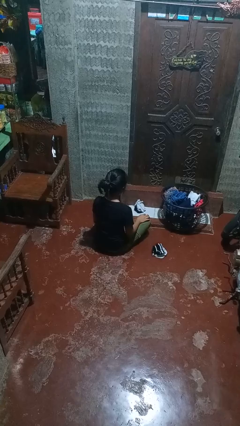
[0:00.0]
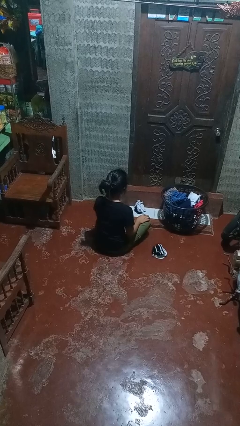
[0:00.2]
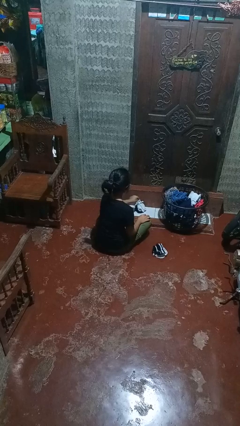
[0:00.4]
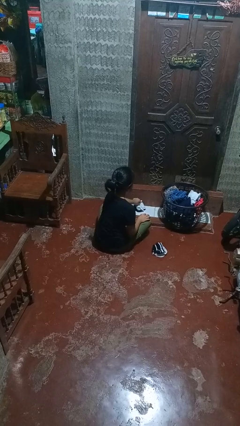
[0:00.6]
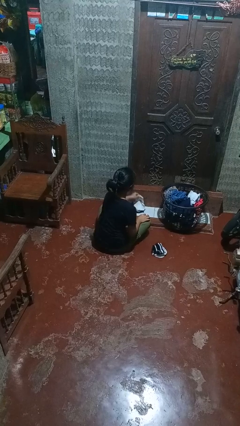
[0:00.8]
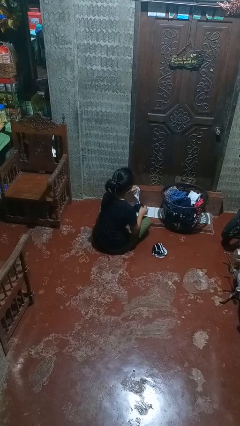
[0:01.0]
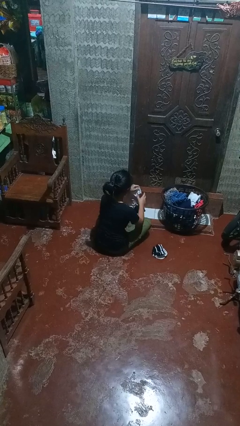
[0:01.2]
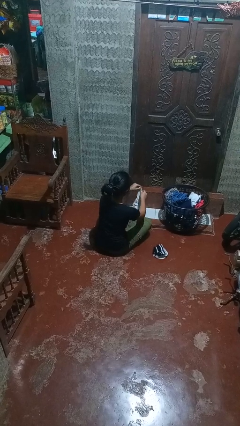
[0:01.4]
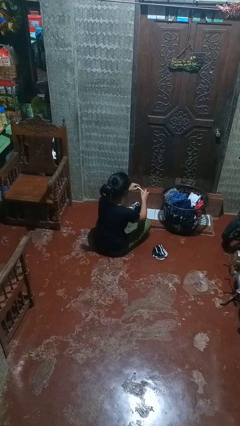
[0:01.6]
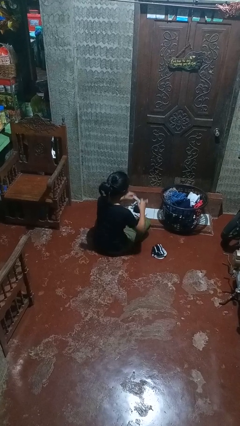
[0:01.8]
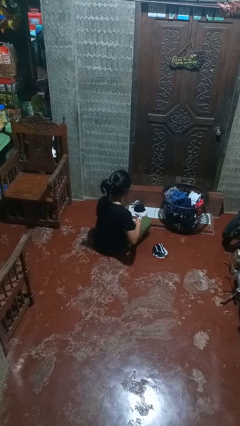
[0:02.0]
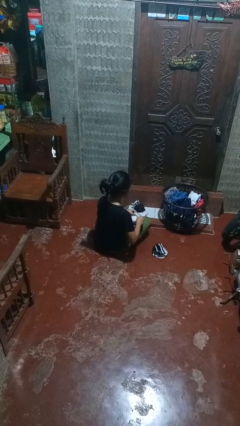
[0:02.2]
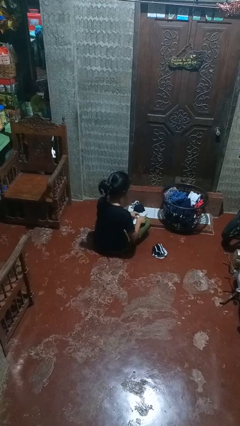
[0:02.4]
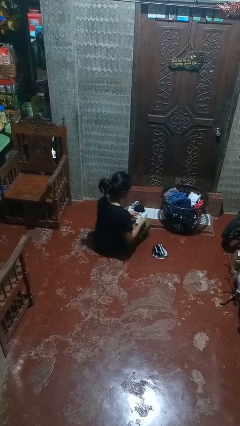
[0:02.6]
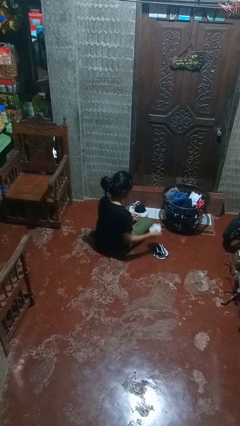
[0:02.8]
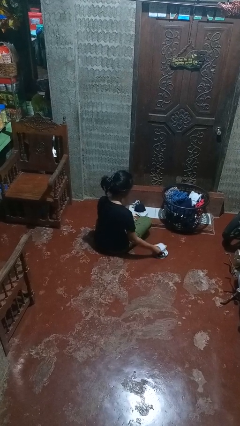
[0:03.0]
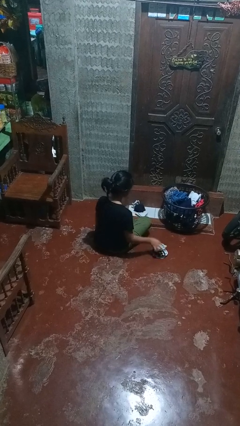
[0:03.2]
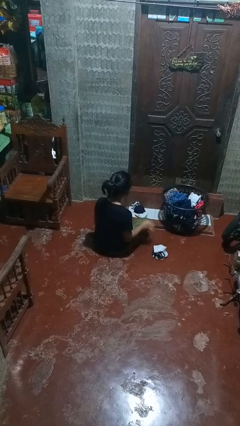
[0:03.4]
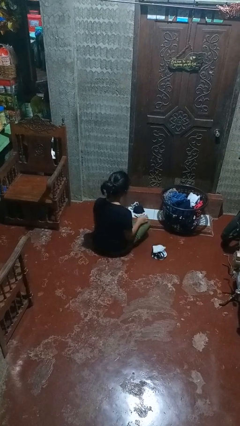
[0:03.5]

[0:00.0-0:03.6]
person folds socks

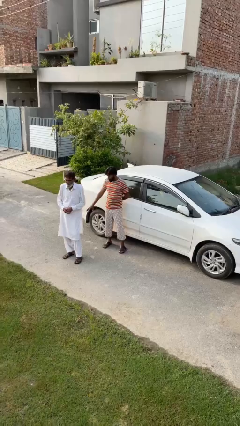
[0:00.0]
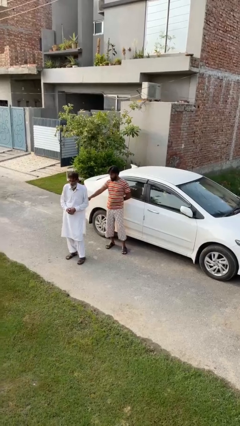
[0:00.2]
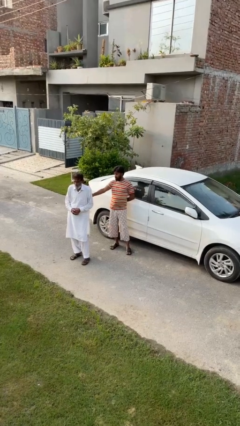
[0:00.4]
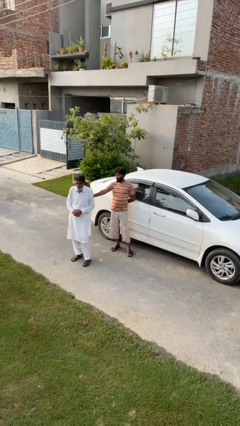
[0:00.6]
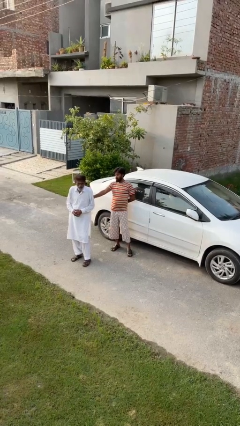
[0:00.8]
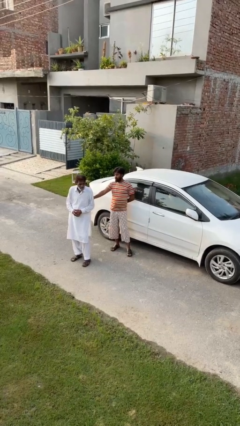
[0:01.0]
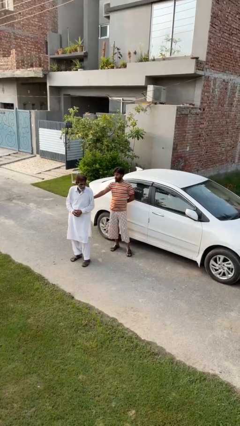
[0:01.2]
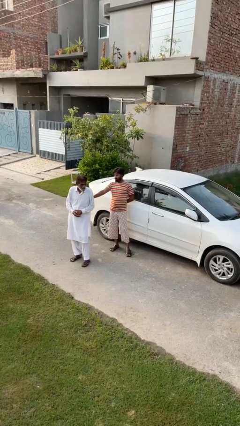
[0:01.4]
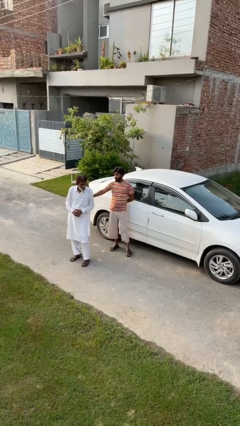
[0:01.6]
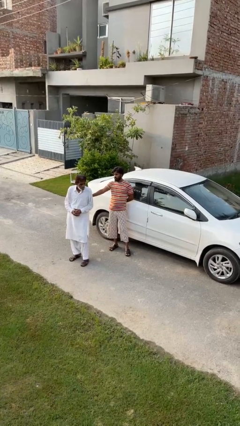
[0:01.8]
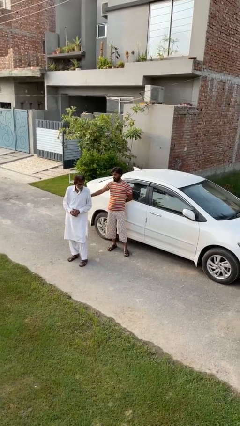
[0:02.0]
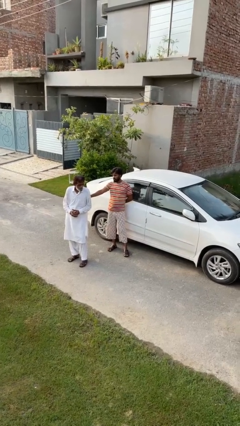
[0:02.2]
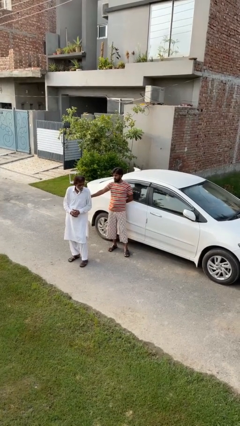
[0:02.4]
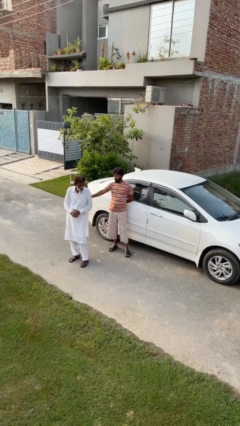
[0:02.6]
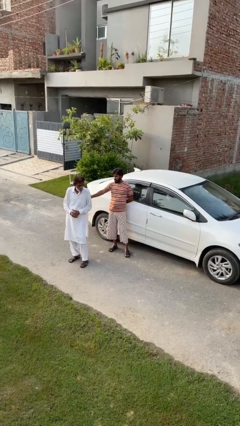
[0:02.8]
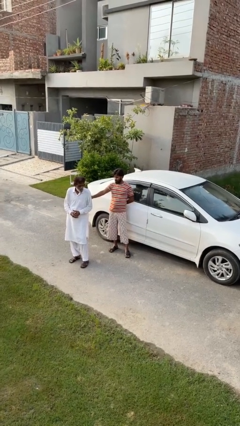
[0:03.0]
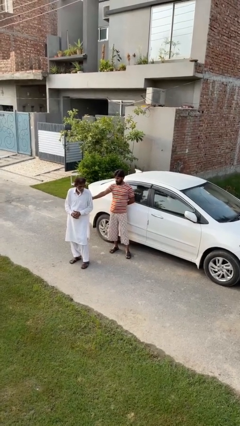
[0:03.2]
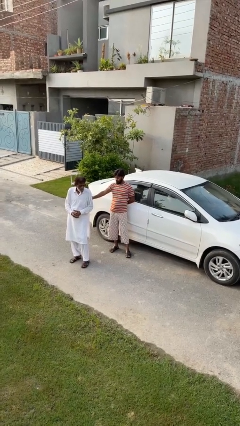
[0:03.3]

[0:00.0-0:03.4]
person touches back of person

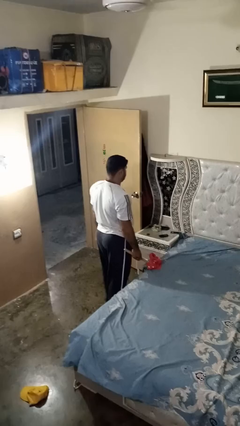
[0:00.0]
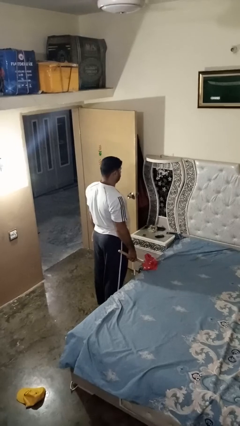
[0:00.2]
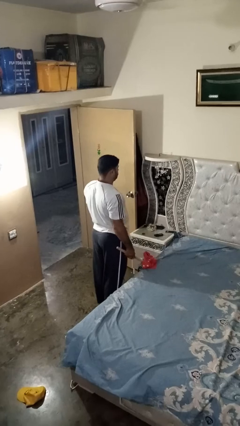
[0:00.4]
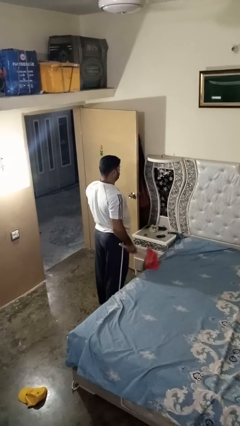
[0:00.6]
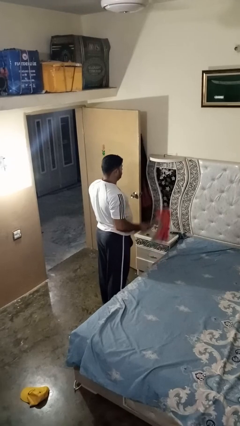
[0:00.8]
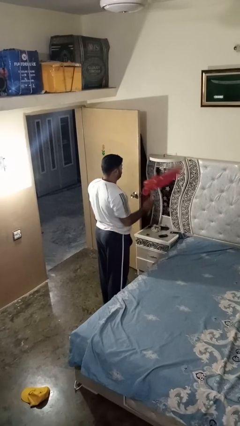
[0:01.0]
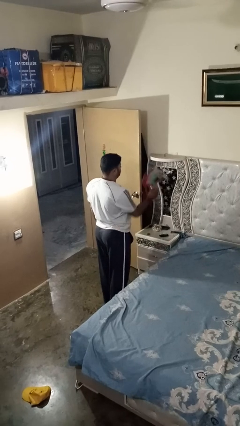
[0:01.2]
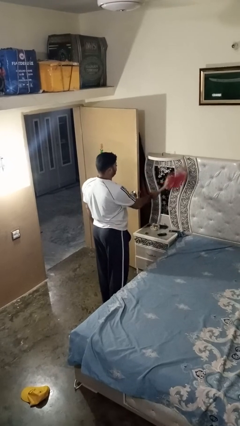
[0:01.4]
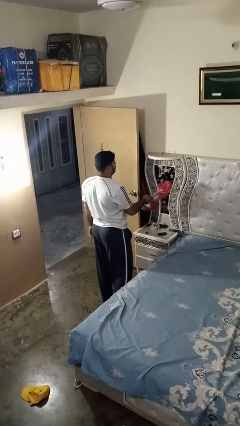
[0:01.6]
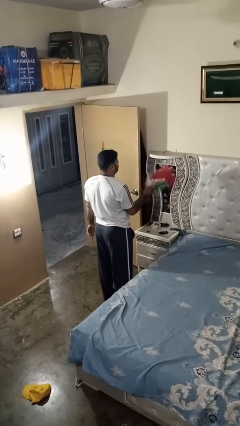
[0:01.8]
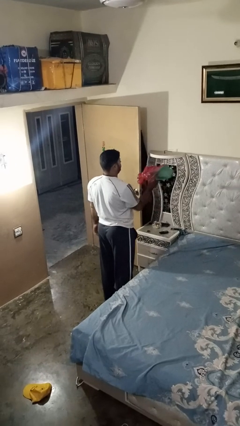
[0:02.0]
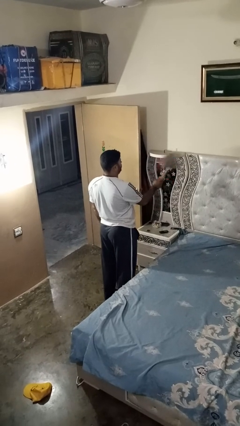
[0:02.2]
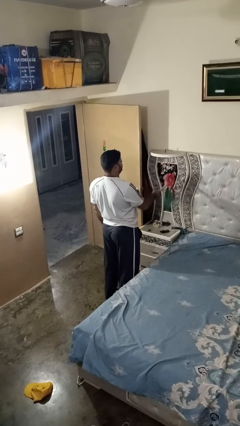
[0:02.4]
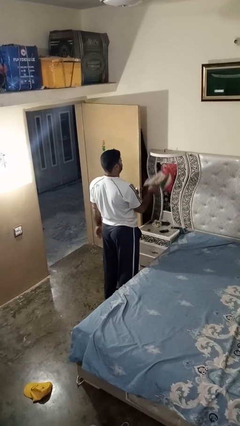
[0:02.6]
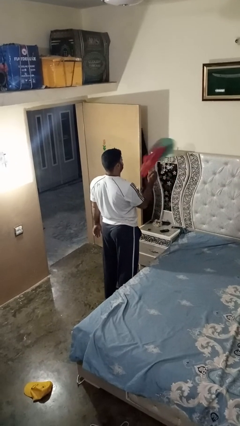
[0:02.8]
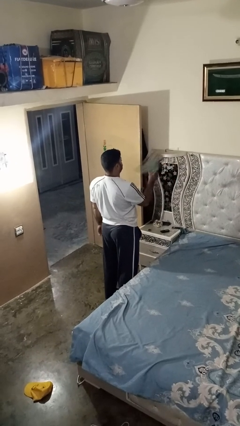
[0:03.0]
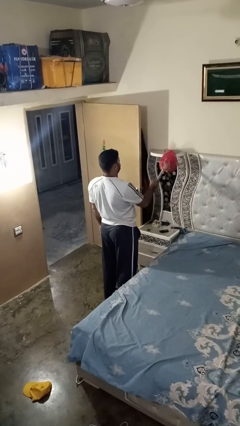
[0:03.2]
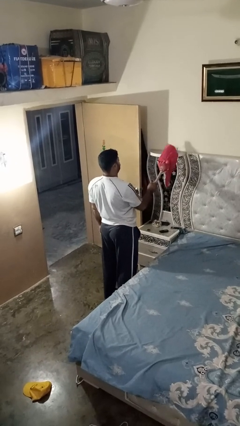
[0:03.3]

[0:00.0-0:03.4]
person dusts furniture

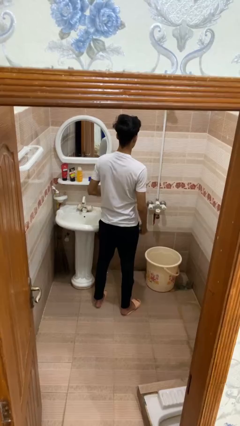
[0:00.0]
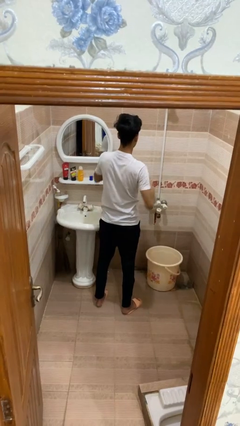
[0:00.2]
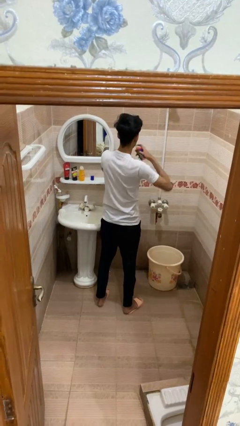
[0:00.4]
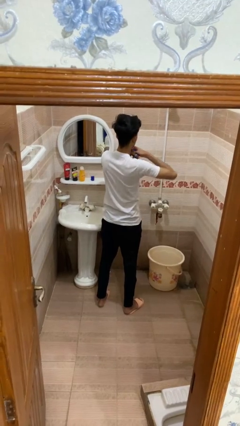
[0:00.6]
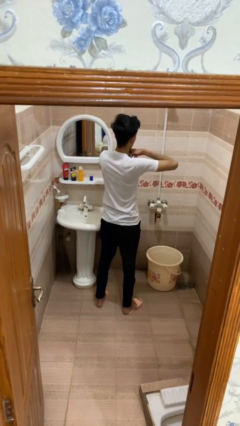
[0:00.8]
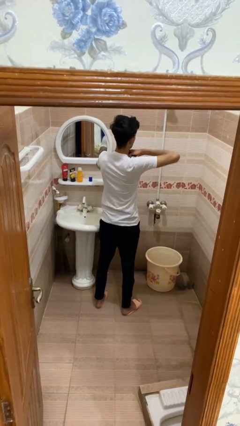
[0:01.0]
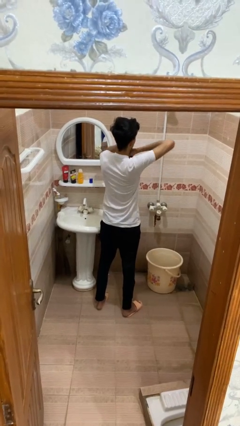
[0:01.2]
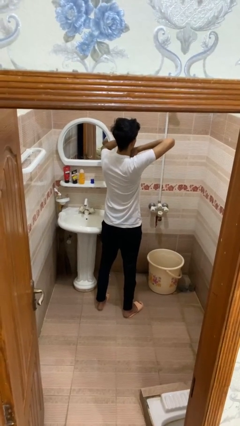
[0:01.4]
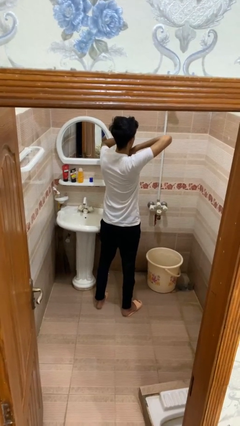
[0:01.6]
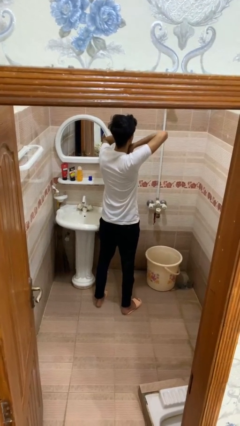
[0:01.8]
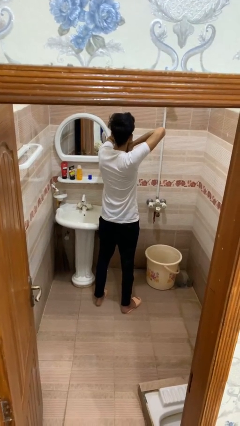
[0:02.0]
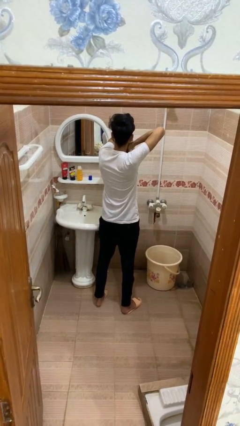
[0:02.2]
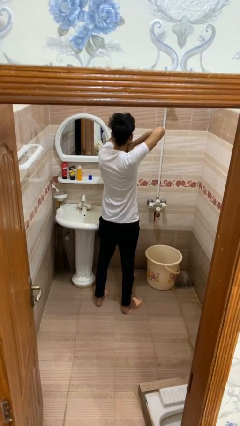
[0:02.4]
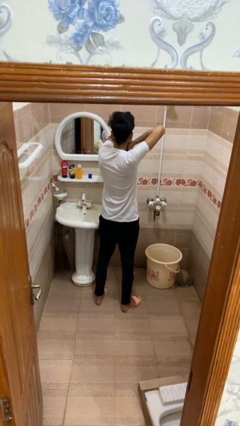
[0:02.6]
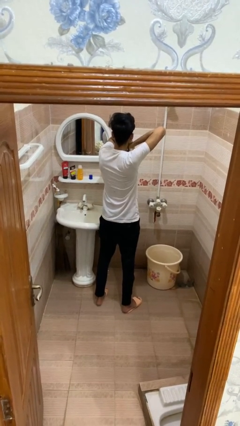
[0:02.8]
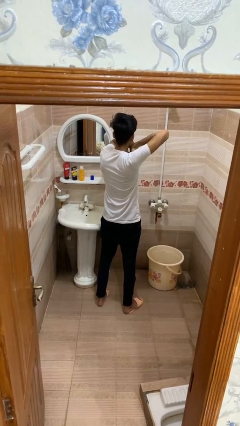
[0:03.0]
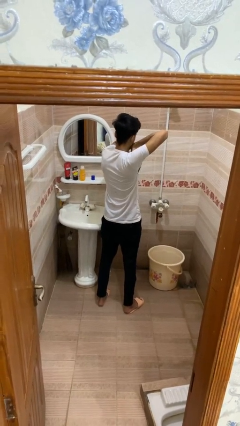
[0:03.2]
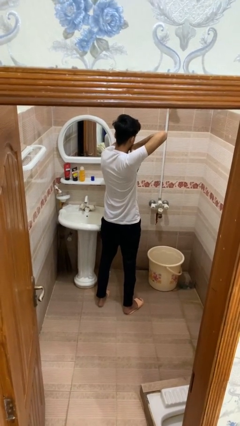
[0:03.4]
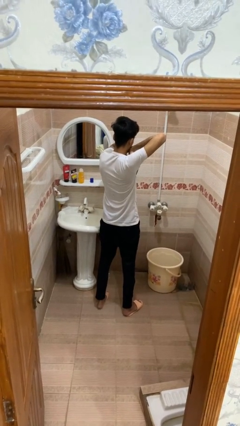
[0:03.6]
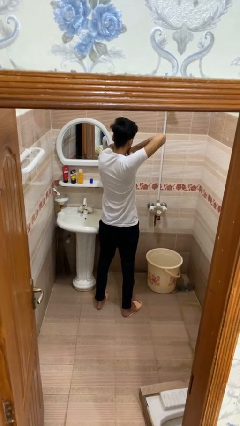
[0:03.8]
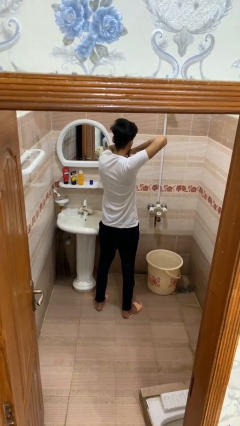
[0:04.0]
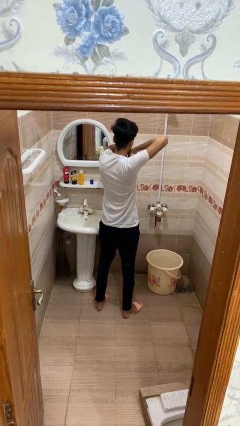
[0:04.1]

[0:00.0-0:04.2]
person applies deodorant

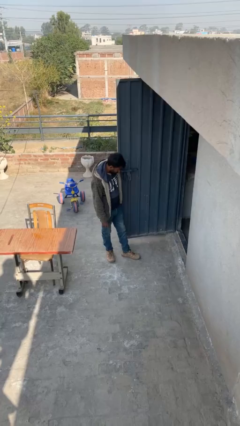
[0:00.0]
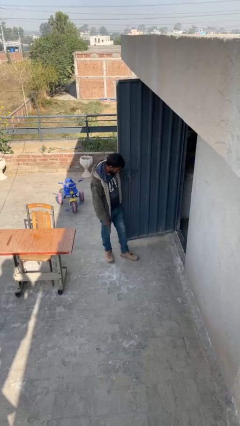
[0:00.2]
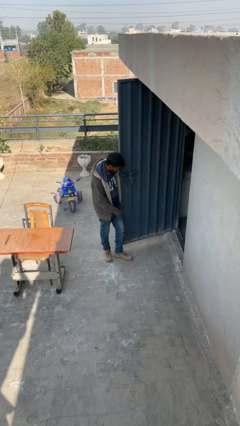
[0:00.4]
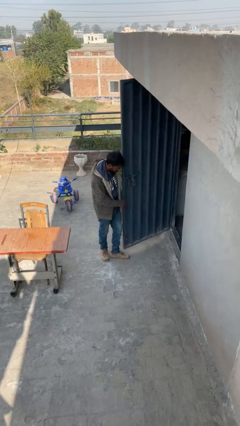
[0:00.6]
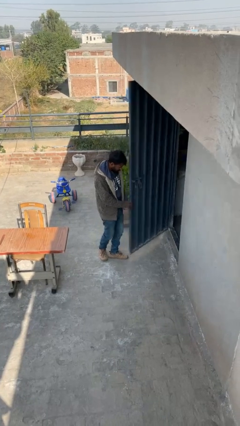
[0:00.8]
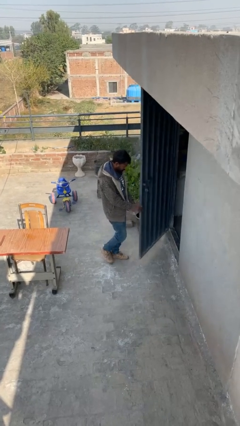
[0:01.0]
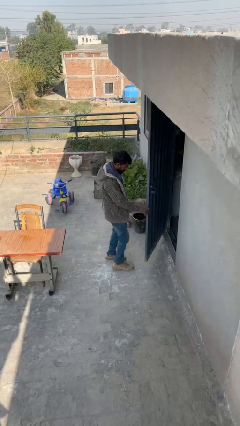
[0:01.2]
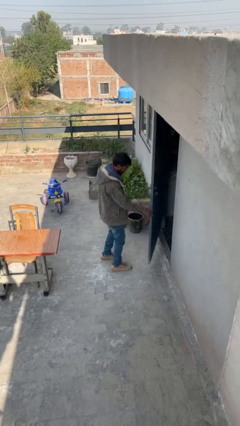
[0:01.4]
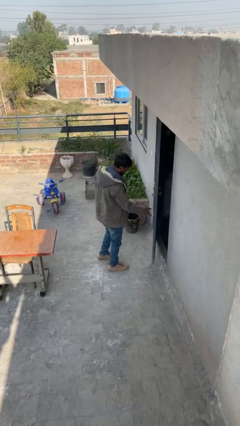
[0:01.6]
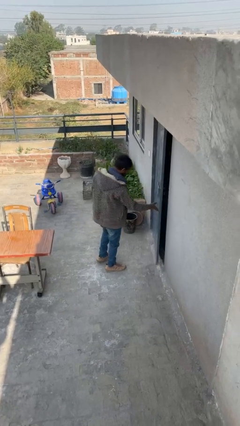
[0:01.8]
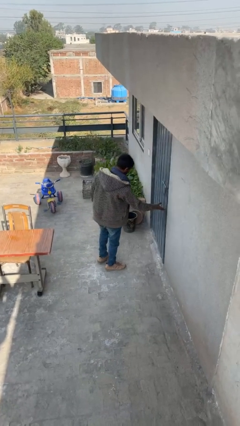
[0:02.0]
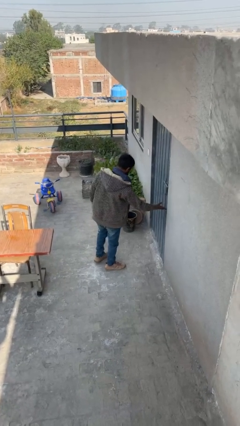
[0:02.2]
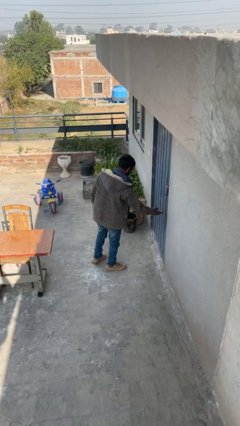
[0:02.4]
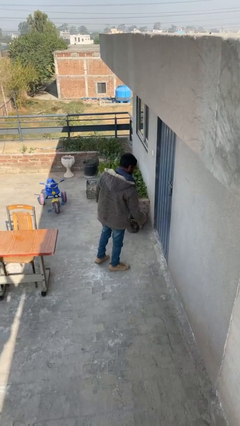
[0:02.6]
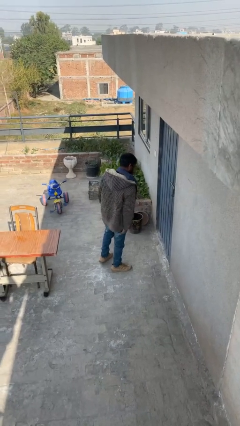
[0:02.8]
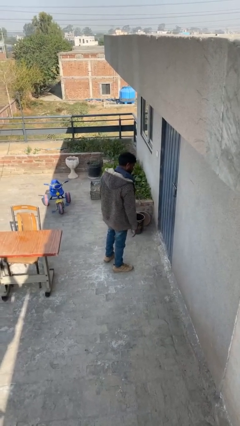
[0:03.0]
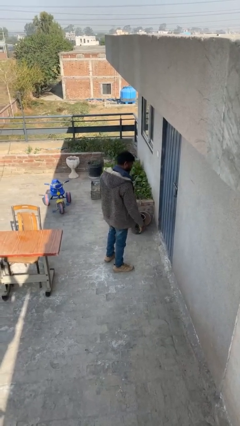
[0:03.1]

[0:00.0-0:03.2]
person closes facility door
